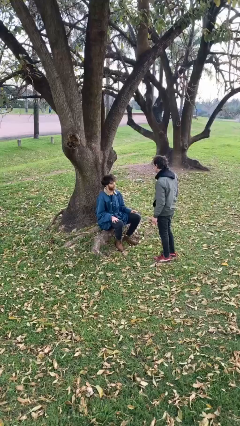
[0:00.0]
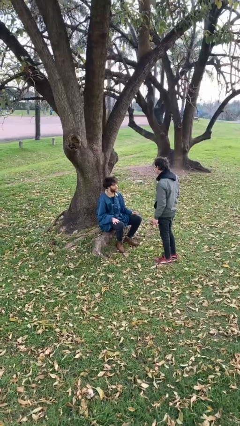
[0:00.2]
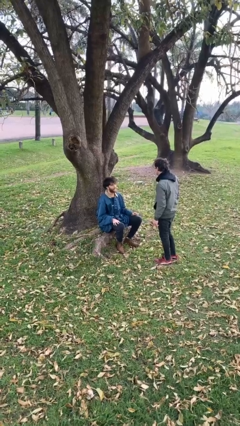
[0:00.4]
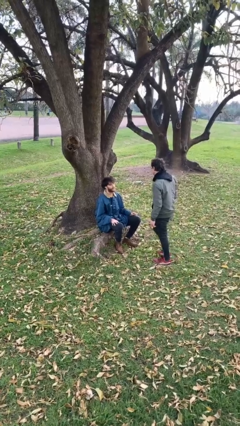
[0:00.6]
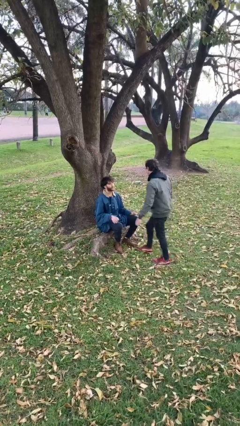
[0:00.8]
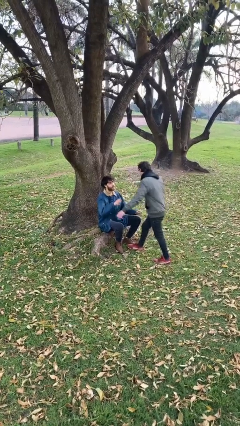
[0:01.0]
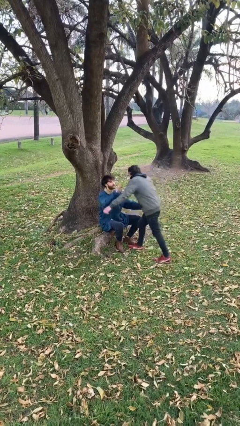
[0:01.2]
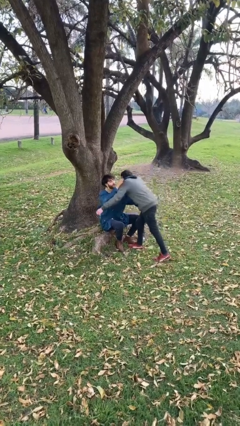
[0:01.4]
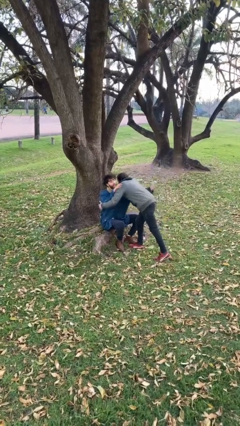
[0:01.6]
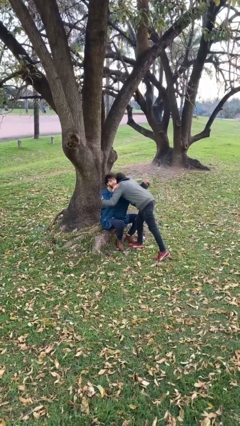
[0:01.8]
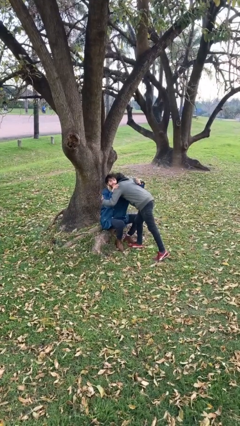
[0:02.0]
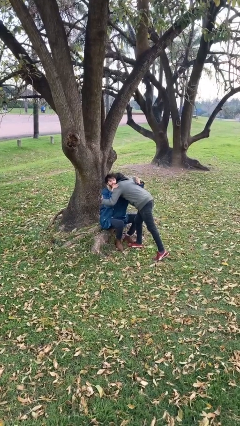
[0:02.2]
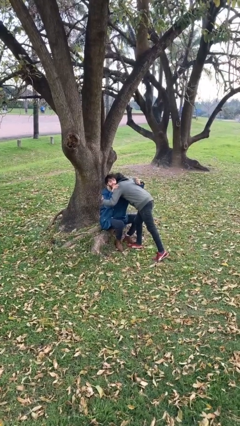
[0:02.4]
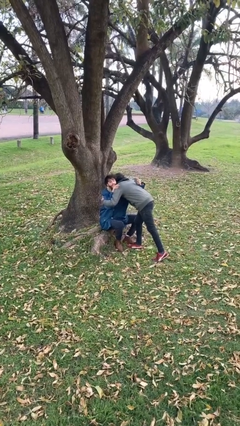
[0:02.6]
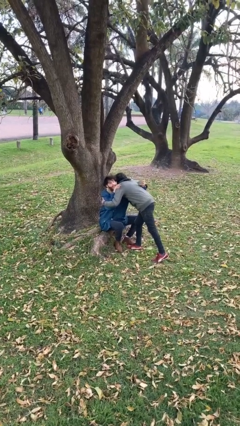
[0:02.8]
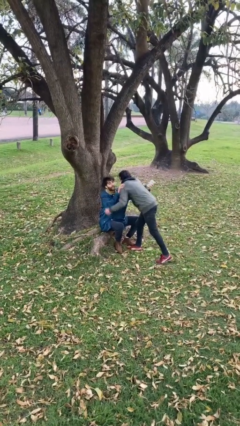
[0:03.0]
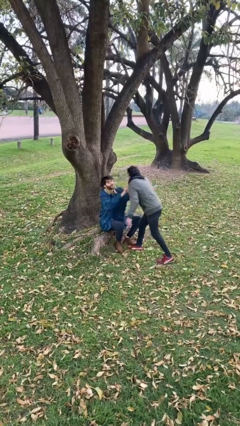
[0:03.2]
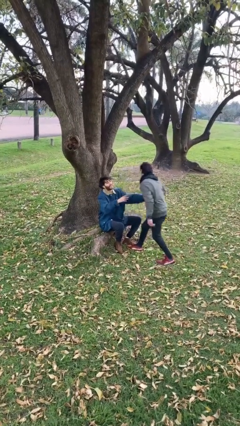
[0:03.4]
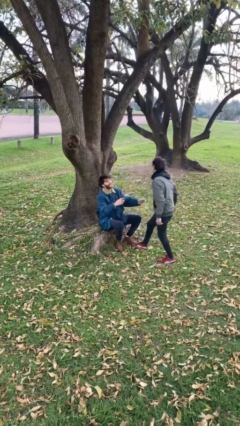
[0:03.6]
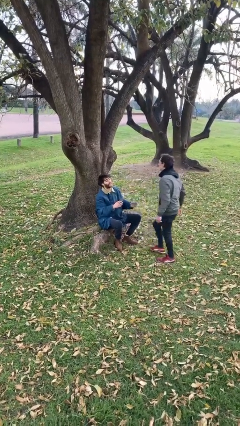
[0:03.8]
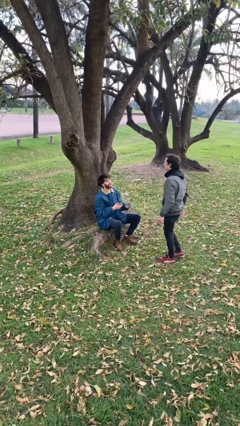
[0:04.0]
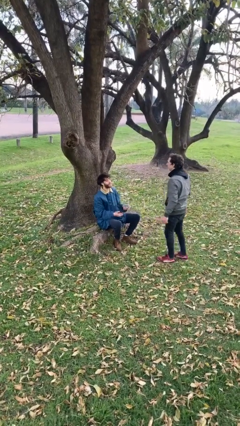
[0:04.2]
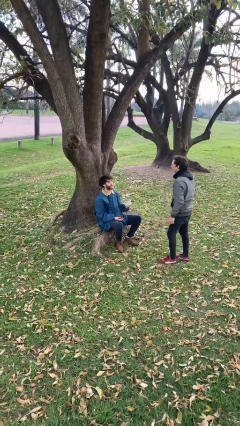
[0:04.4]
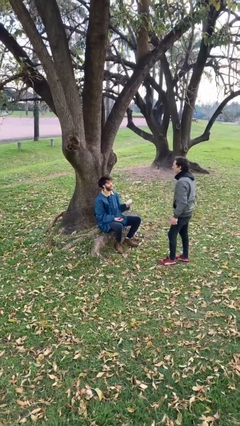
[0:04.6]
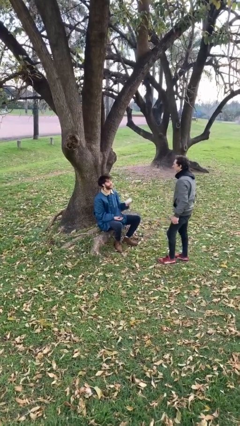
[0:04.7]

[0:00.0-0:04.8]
person embraces person

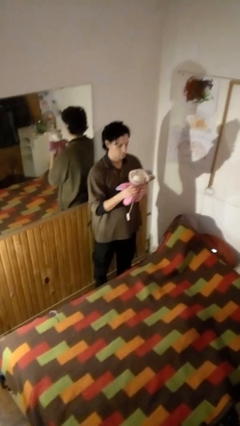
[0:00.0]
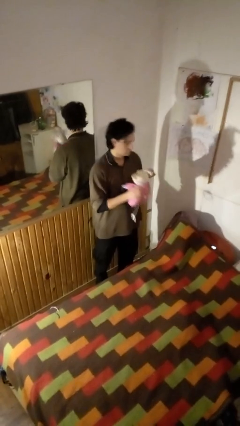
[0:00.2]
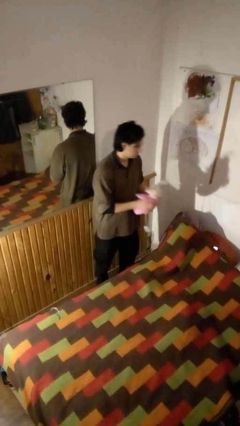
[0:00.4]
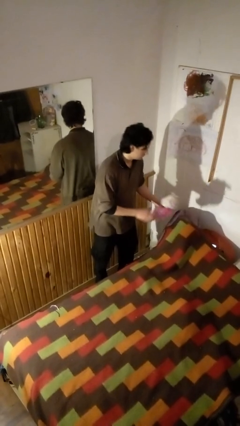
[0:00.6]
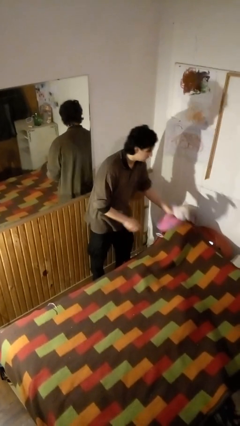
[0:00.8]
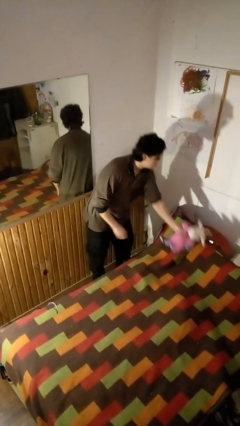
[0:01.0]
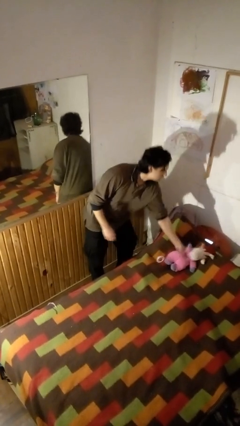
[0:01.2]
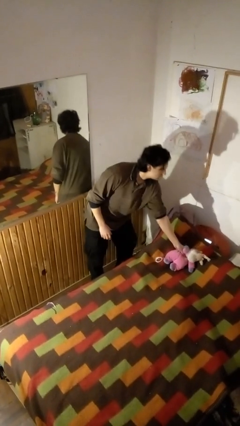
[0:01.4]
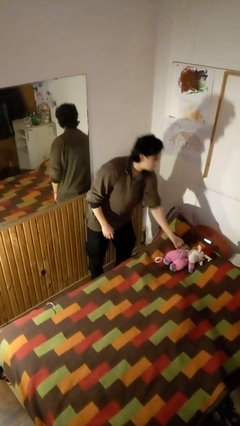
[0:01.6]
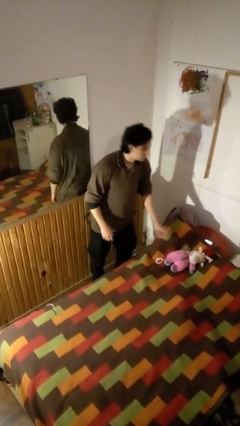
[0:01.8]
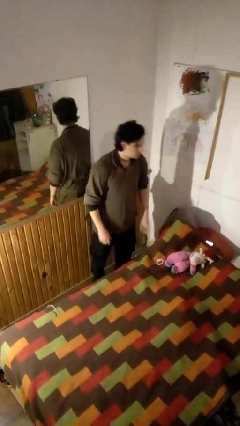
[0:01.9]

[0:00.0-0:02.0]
person puts down object on bed

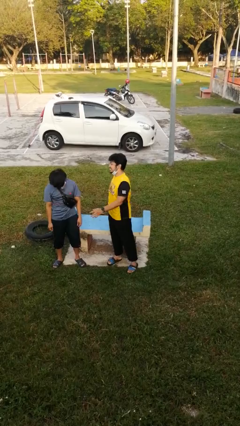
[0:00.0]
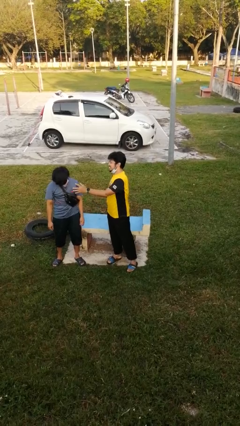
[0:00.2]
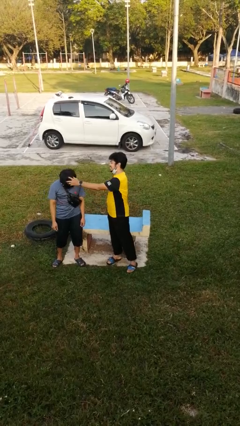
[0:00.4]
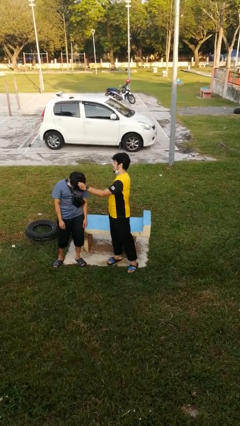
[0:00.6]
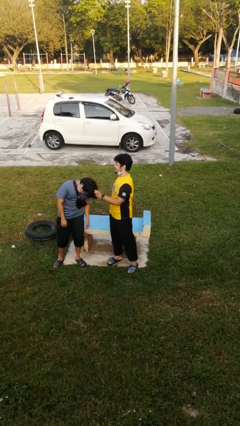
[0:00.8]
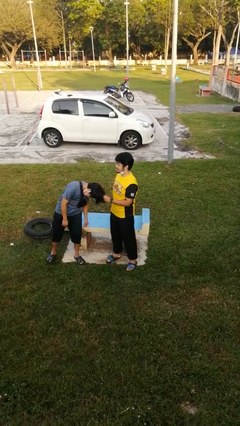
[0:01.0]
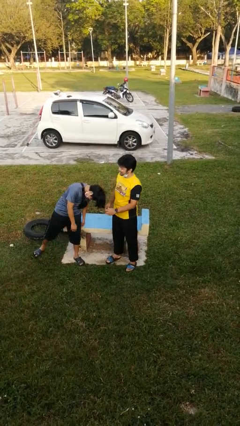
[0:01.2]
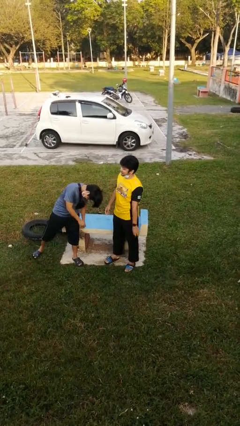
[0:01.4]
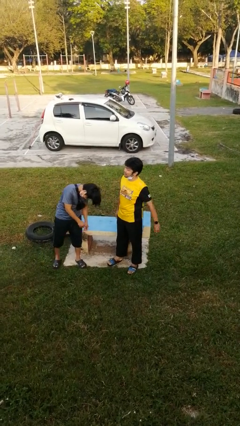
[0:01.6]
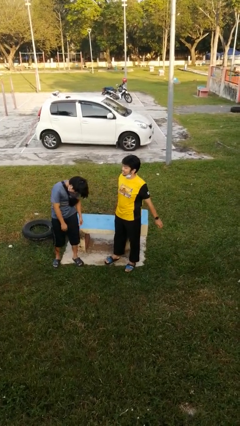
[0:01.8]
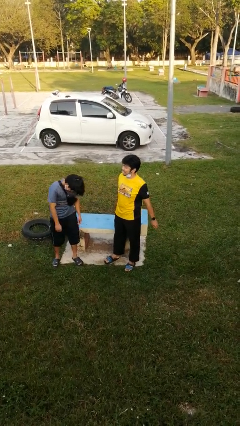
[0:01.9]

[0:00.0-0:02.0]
person grabs person by hair

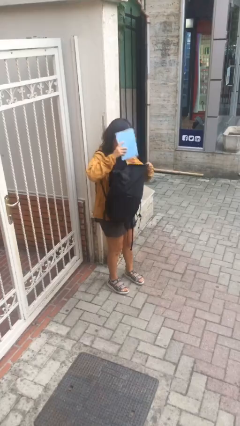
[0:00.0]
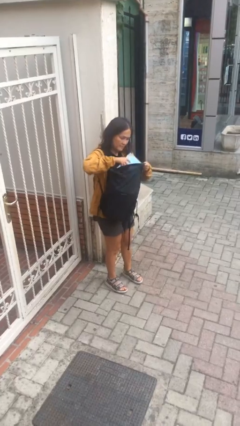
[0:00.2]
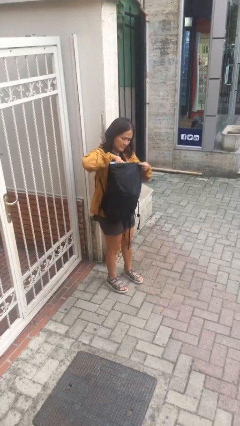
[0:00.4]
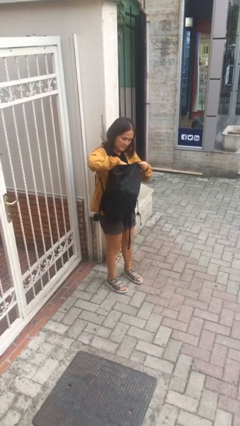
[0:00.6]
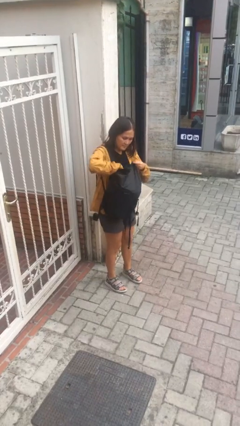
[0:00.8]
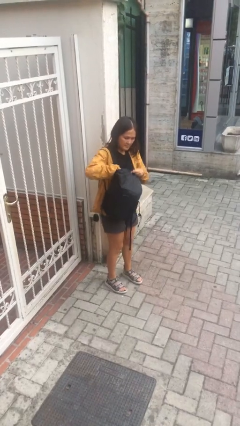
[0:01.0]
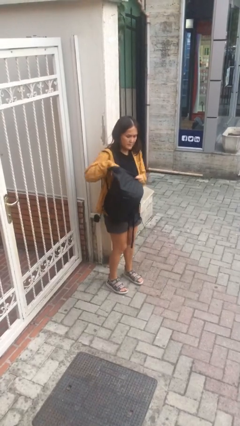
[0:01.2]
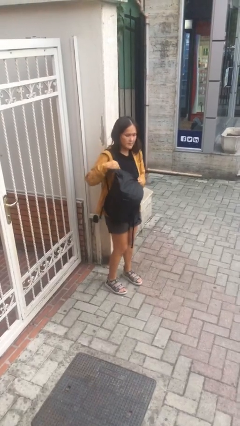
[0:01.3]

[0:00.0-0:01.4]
person puts object into backpack

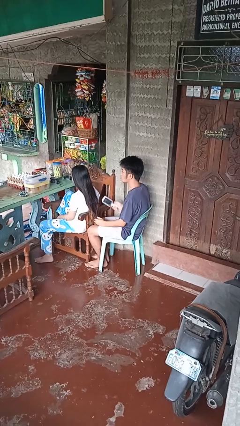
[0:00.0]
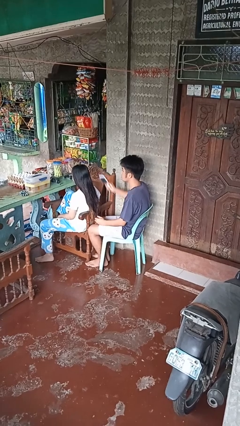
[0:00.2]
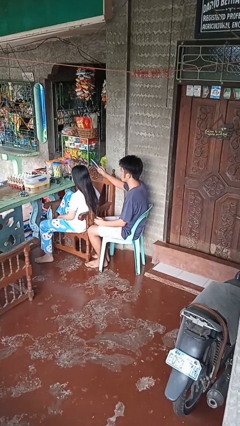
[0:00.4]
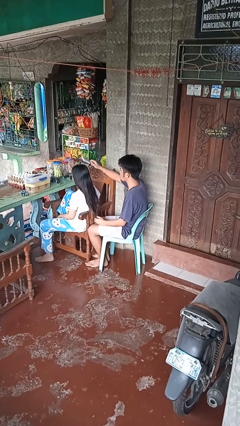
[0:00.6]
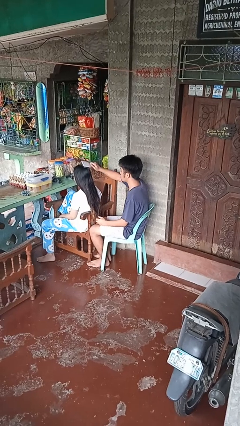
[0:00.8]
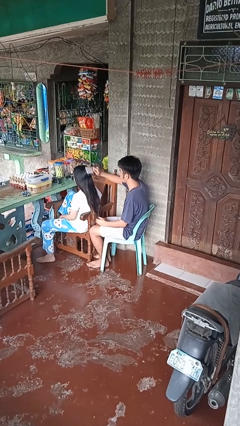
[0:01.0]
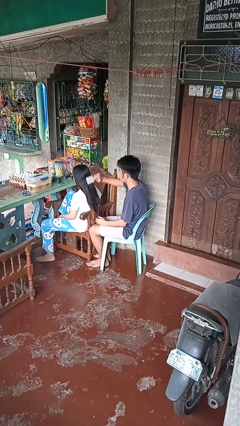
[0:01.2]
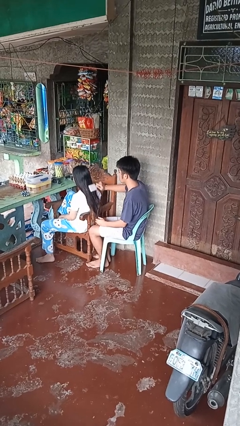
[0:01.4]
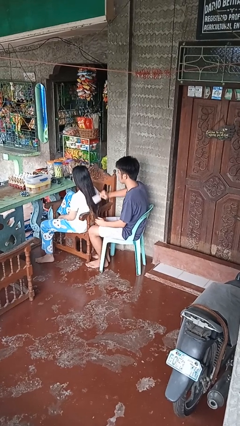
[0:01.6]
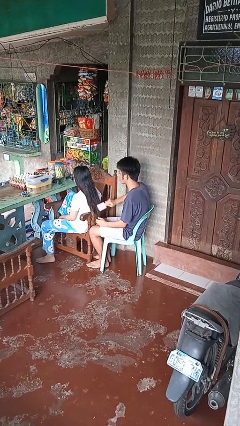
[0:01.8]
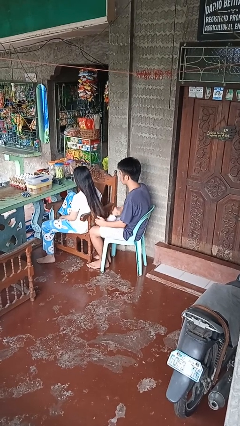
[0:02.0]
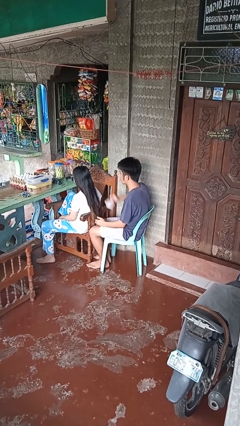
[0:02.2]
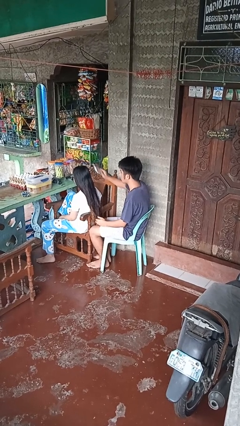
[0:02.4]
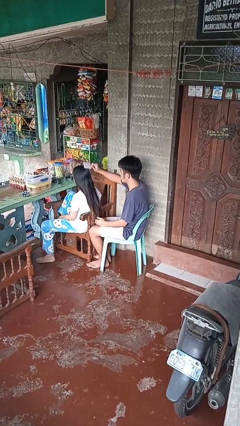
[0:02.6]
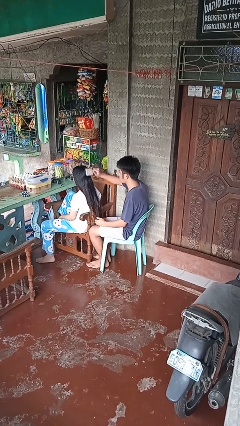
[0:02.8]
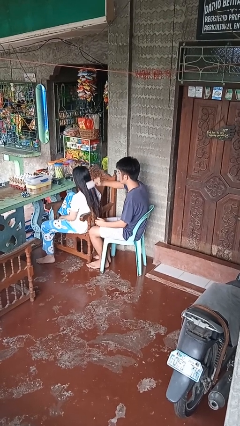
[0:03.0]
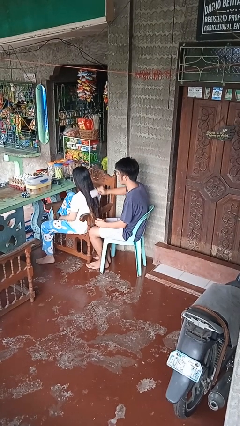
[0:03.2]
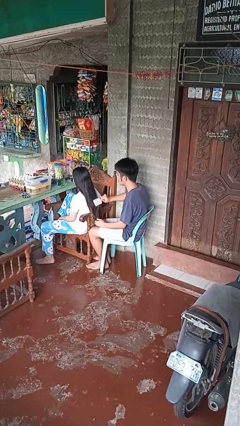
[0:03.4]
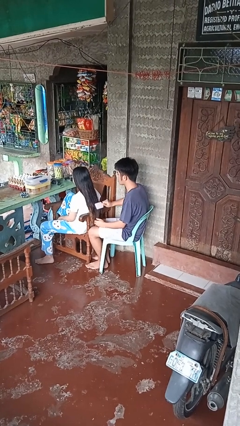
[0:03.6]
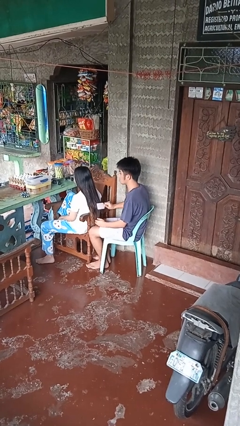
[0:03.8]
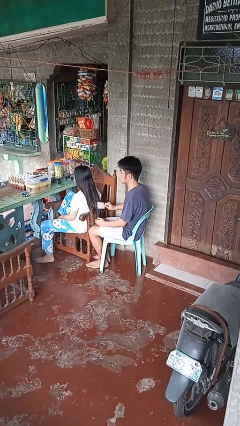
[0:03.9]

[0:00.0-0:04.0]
person brushes hair of person

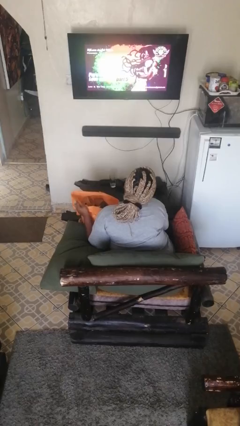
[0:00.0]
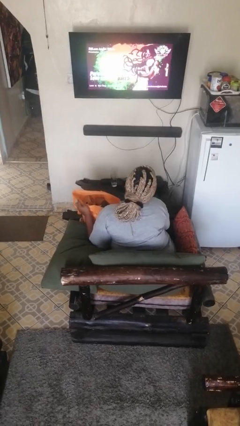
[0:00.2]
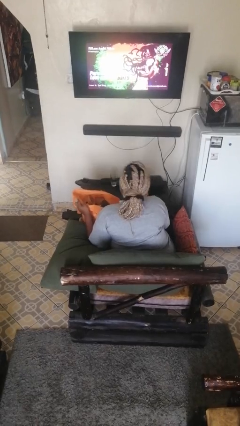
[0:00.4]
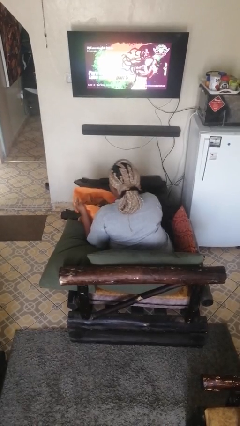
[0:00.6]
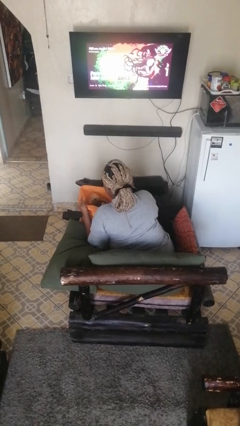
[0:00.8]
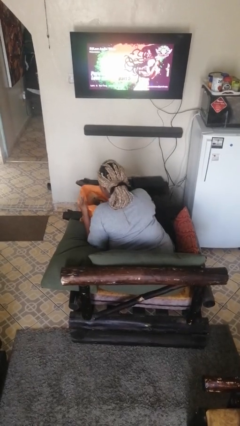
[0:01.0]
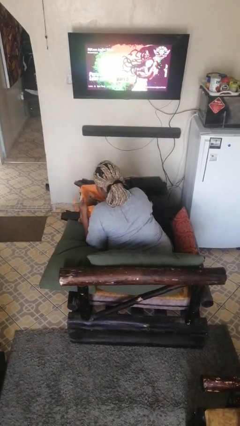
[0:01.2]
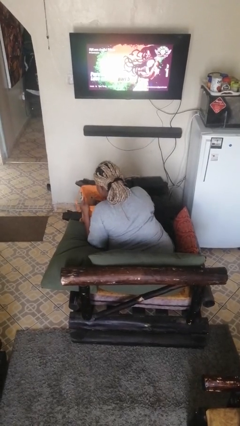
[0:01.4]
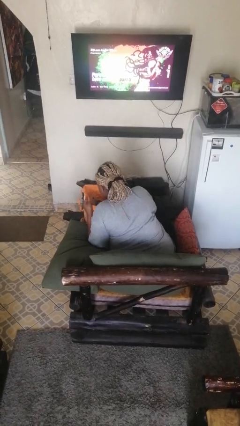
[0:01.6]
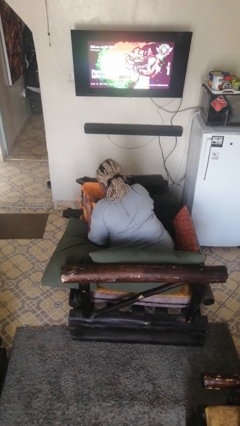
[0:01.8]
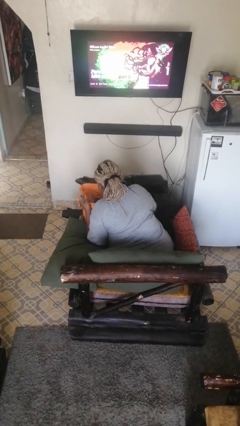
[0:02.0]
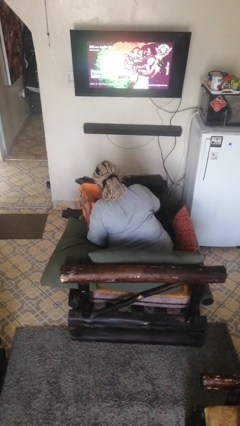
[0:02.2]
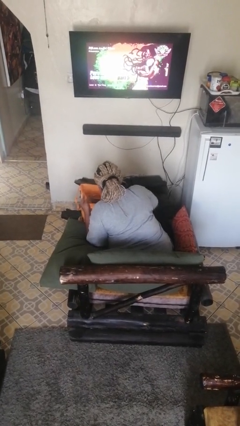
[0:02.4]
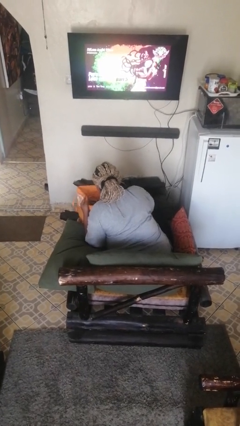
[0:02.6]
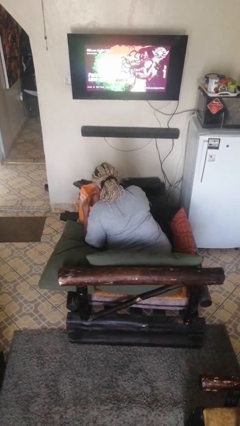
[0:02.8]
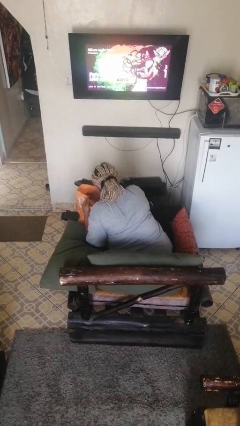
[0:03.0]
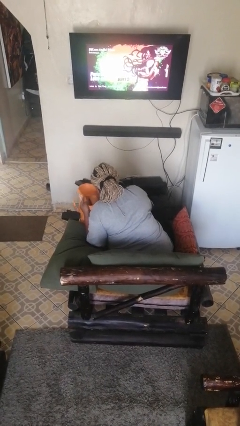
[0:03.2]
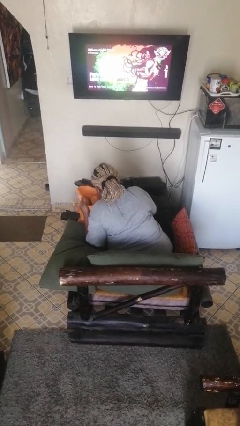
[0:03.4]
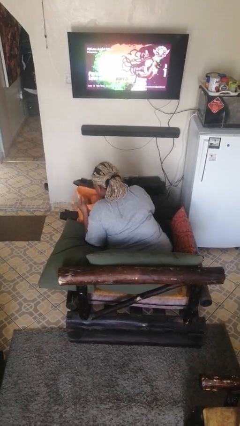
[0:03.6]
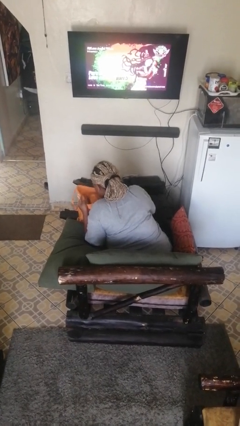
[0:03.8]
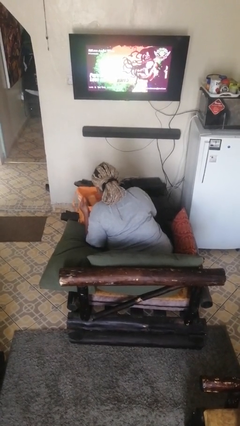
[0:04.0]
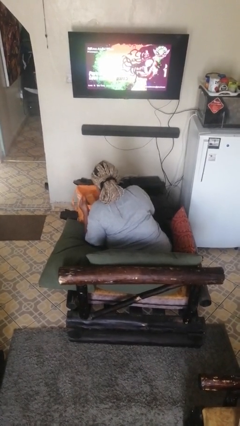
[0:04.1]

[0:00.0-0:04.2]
person searches in bag
